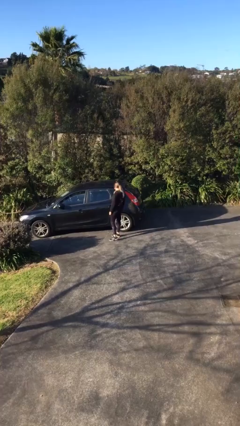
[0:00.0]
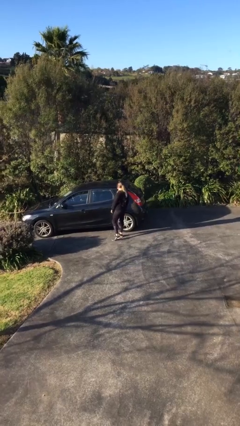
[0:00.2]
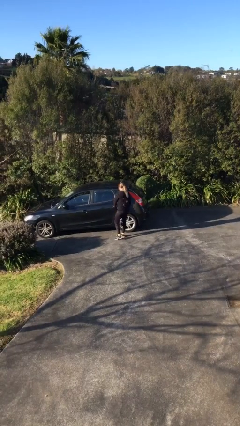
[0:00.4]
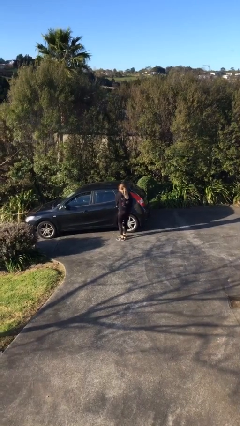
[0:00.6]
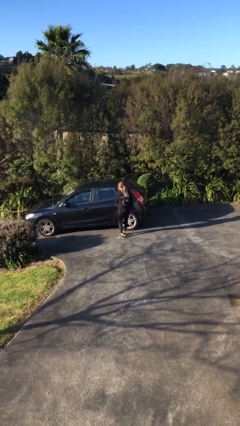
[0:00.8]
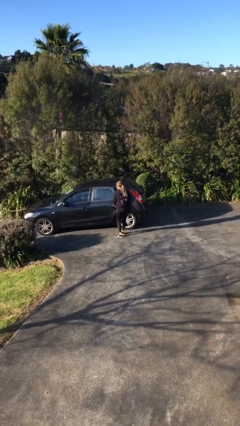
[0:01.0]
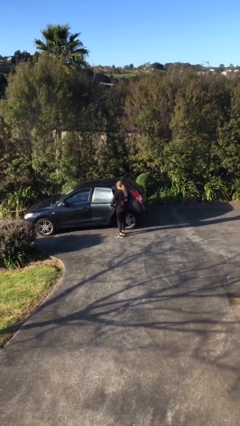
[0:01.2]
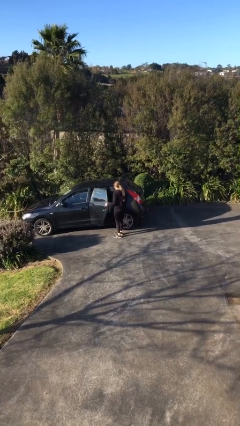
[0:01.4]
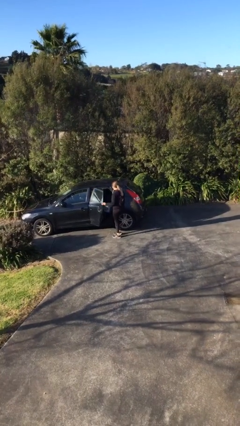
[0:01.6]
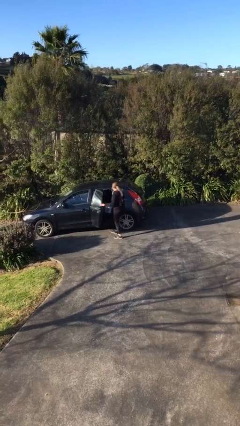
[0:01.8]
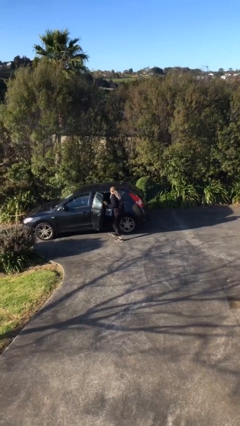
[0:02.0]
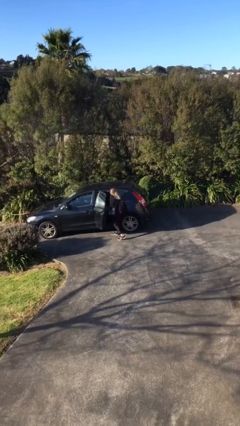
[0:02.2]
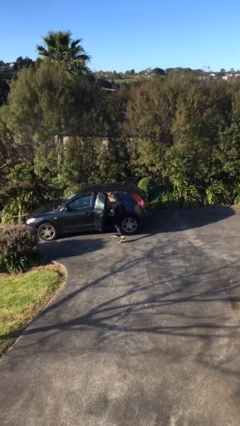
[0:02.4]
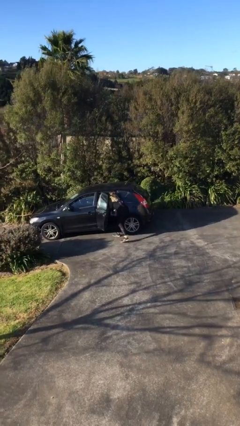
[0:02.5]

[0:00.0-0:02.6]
person opens car door

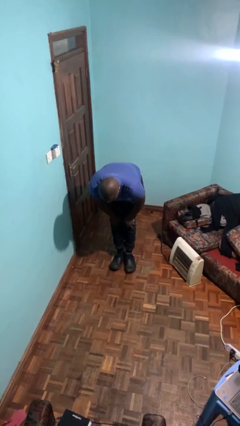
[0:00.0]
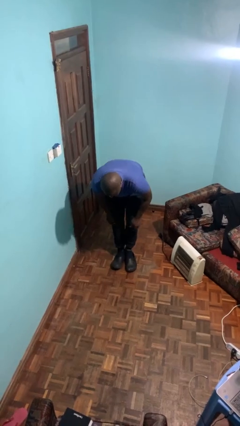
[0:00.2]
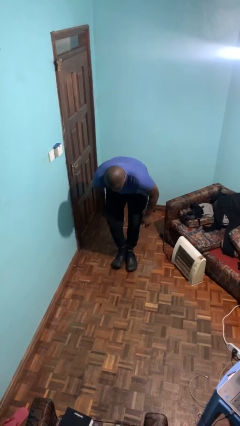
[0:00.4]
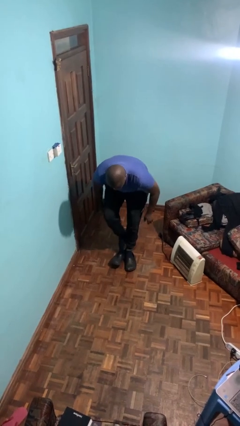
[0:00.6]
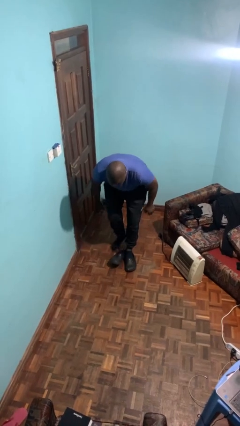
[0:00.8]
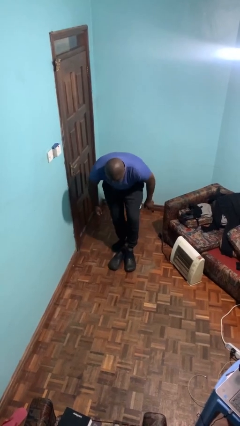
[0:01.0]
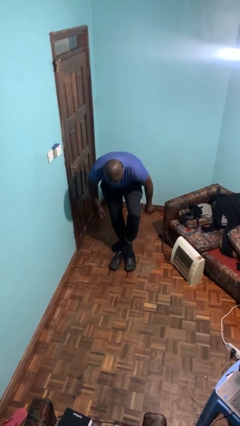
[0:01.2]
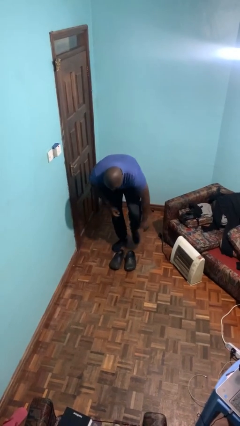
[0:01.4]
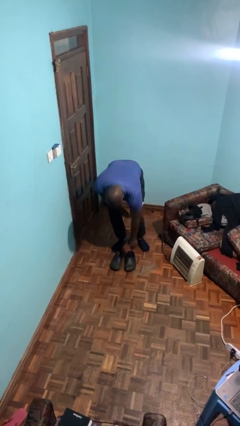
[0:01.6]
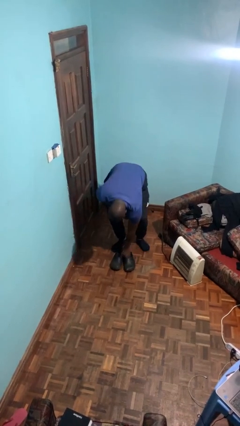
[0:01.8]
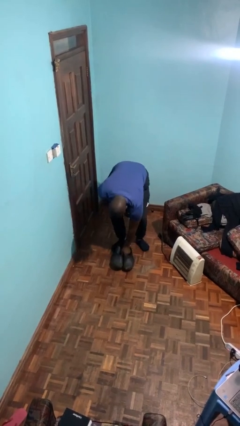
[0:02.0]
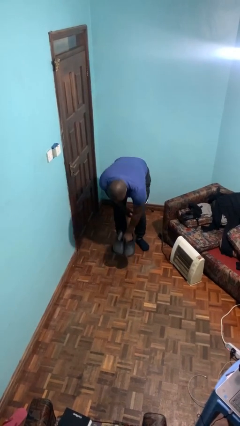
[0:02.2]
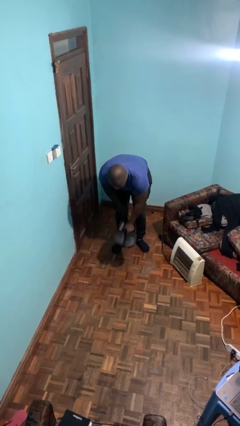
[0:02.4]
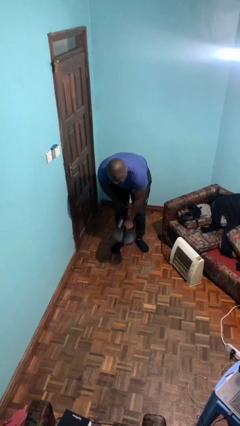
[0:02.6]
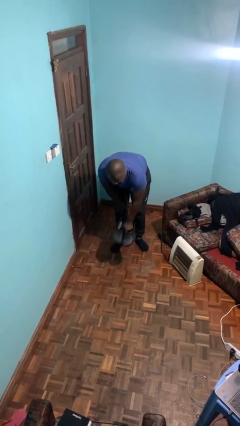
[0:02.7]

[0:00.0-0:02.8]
person takes off shoes

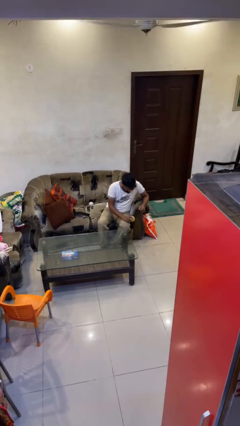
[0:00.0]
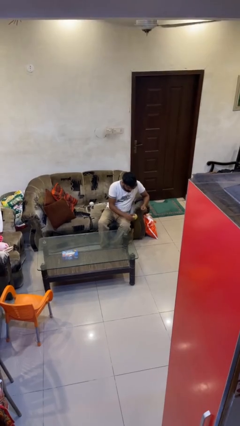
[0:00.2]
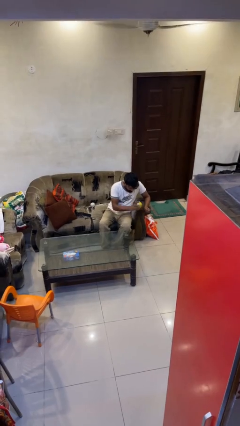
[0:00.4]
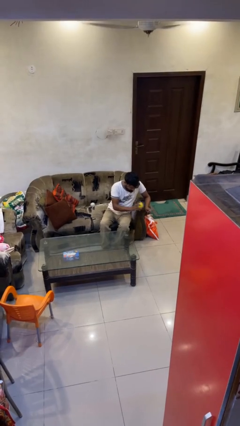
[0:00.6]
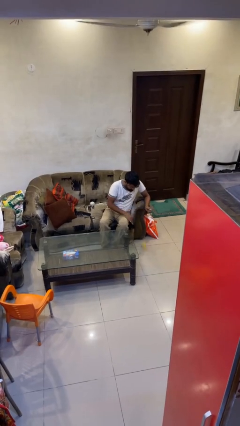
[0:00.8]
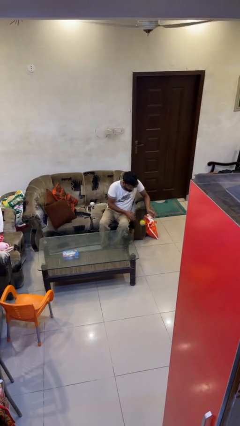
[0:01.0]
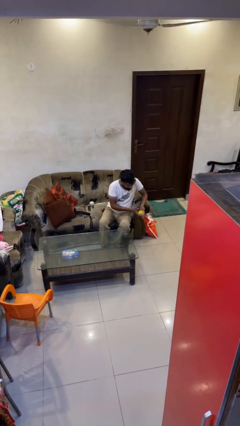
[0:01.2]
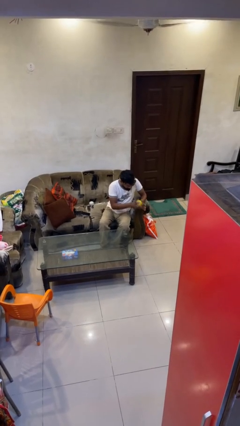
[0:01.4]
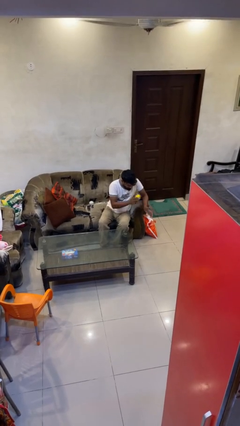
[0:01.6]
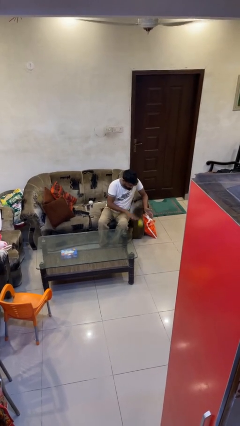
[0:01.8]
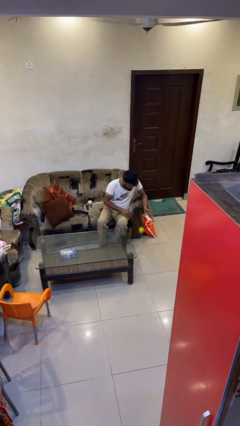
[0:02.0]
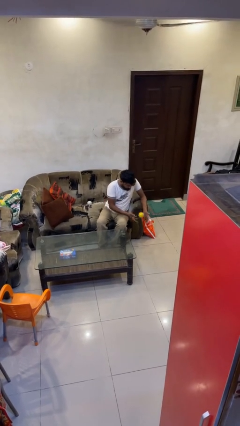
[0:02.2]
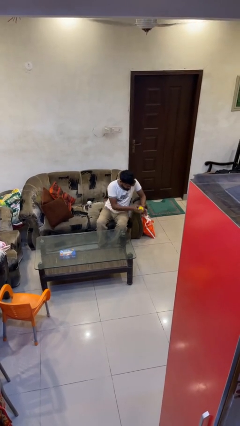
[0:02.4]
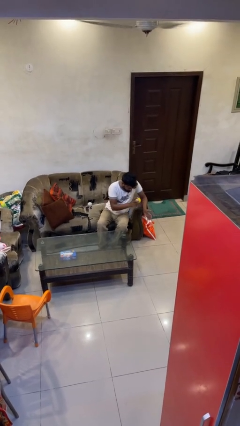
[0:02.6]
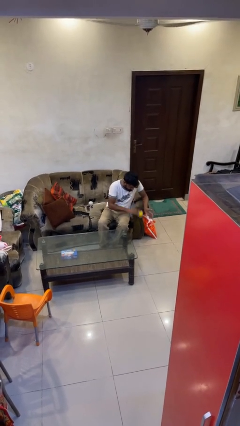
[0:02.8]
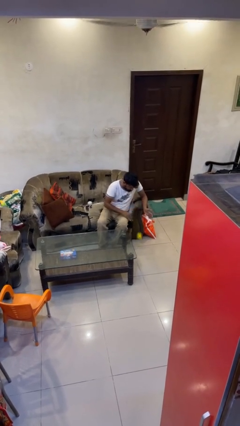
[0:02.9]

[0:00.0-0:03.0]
person bounces ball on floor

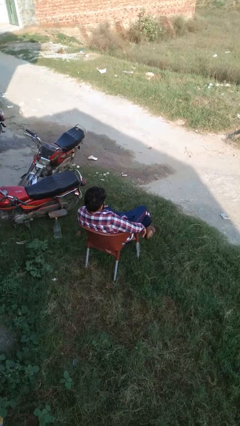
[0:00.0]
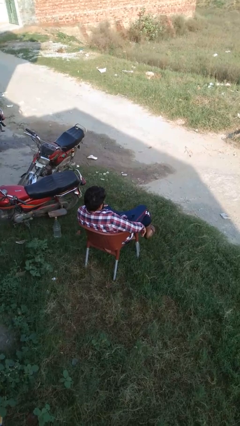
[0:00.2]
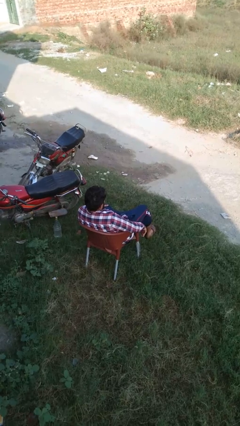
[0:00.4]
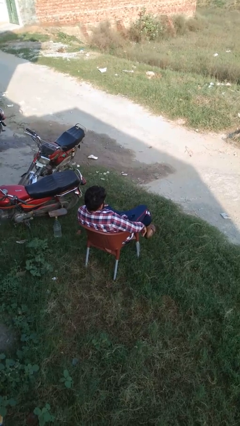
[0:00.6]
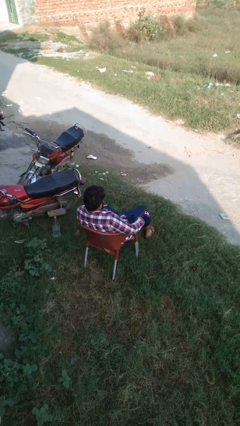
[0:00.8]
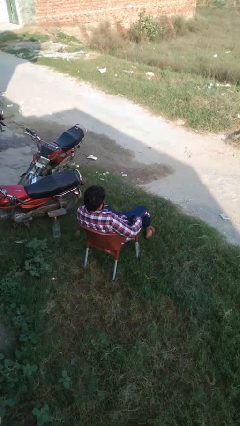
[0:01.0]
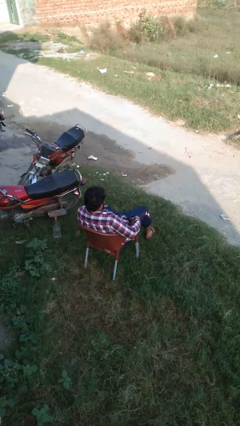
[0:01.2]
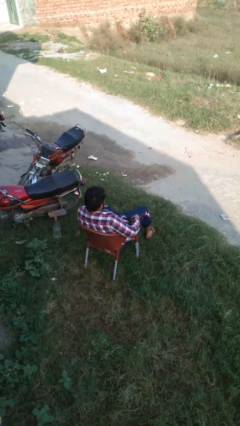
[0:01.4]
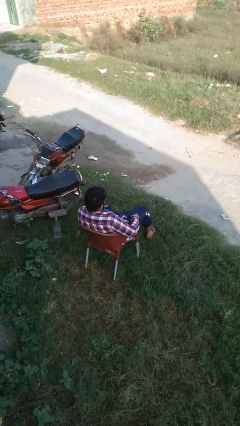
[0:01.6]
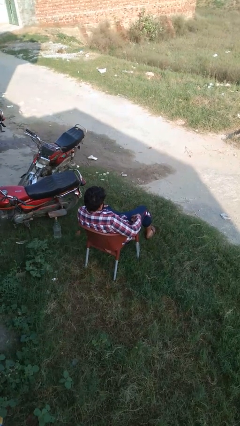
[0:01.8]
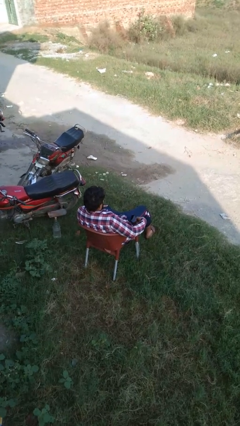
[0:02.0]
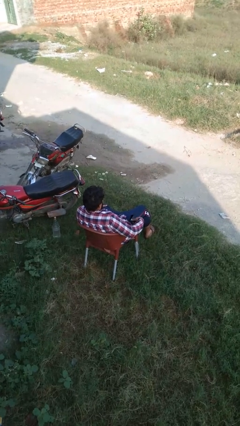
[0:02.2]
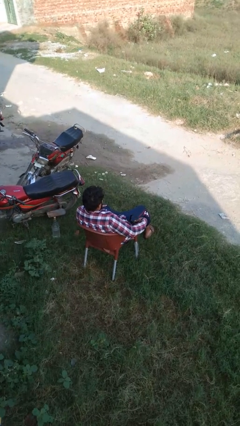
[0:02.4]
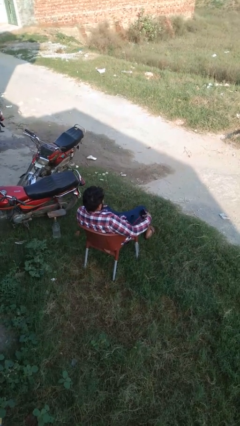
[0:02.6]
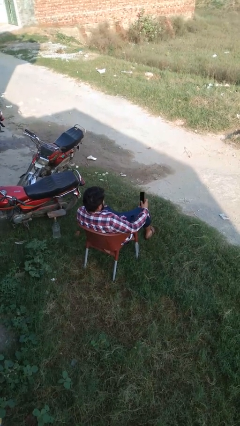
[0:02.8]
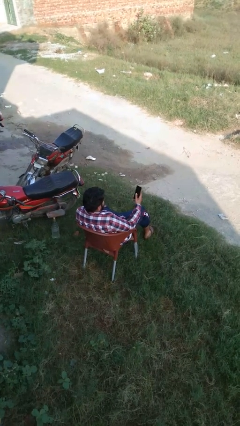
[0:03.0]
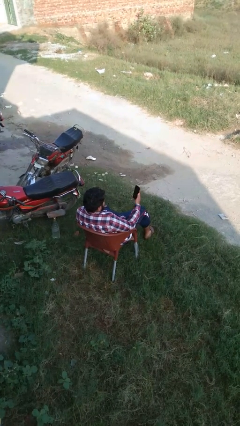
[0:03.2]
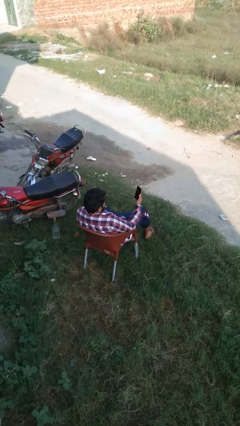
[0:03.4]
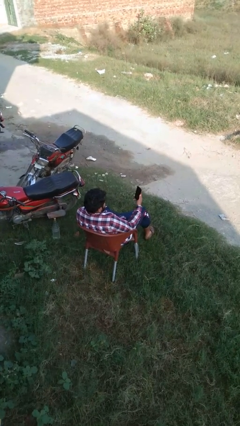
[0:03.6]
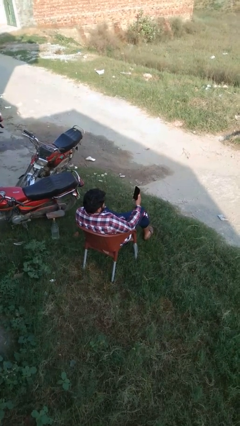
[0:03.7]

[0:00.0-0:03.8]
person takes phone from pocket

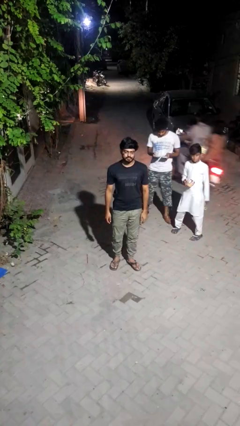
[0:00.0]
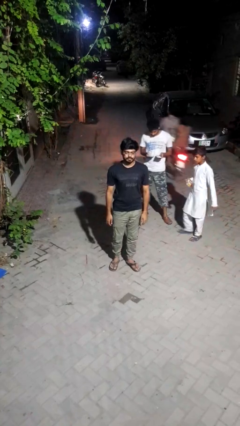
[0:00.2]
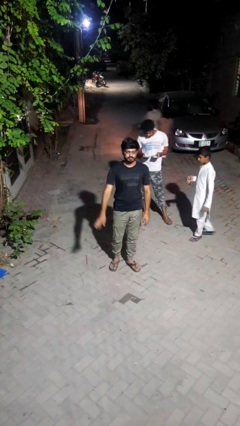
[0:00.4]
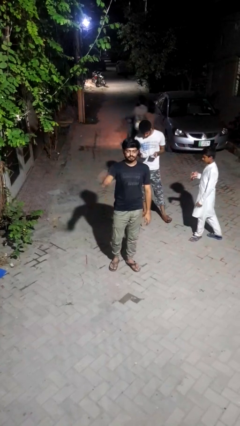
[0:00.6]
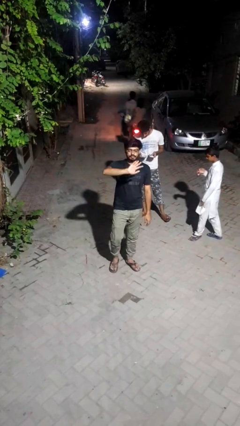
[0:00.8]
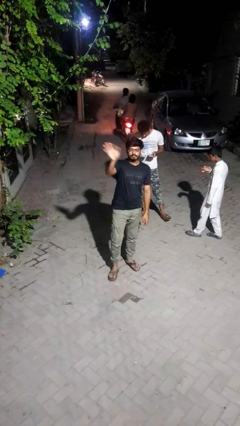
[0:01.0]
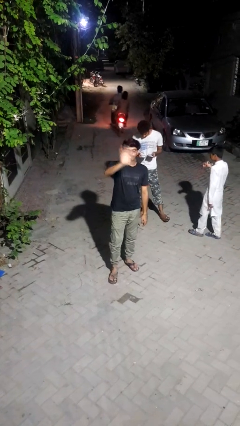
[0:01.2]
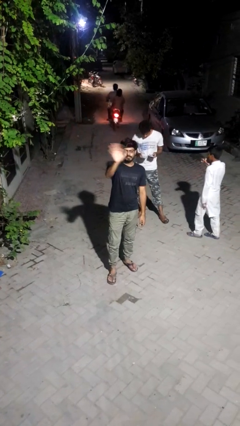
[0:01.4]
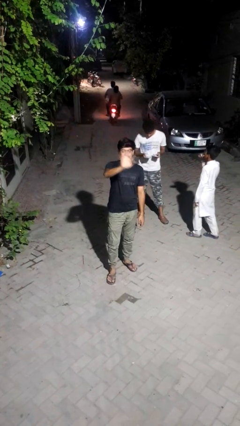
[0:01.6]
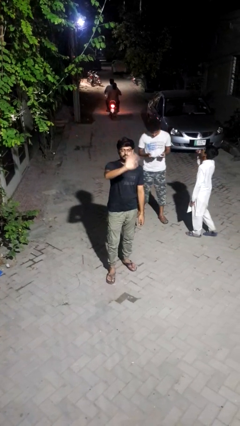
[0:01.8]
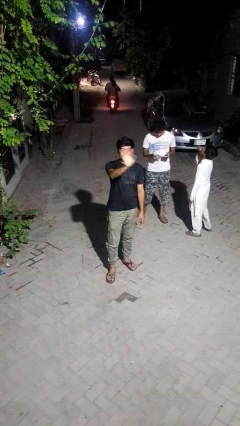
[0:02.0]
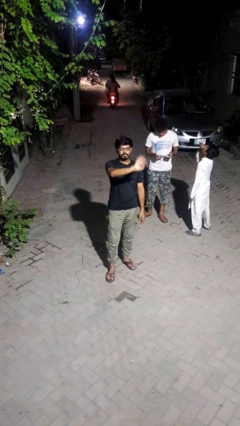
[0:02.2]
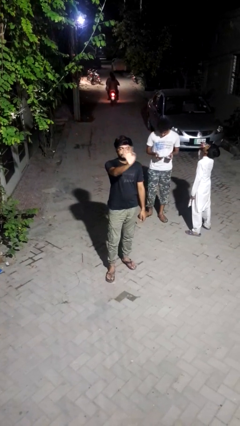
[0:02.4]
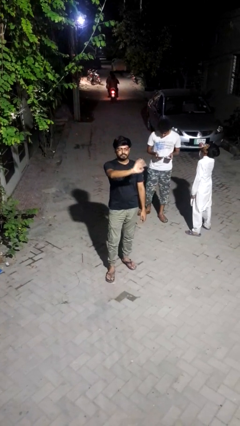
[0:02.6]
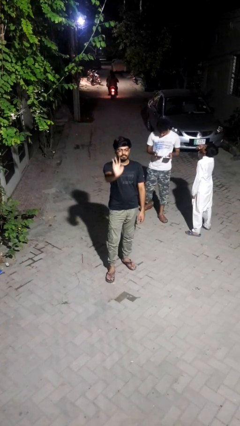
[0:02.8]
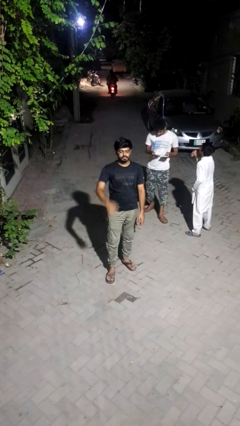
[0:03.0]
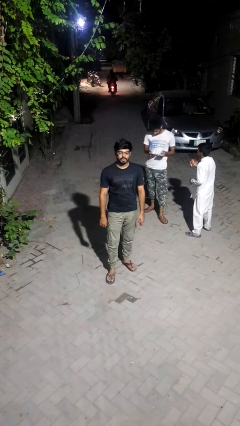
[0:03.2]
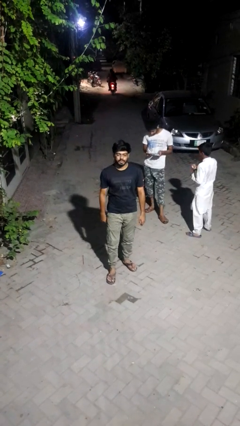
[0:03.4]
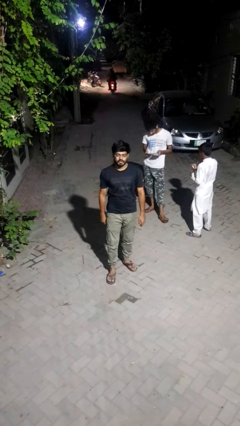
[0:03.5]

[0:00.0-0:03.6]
person waves at person

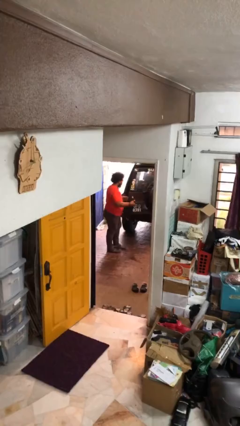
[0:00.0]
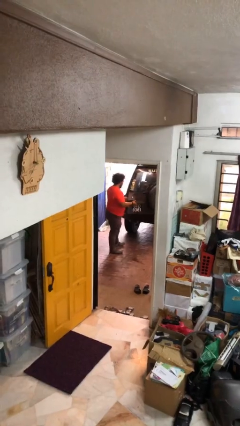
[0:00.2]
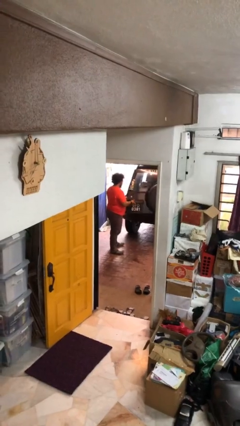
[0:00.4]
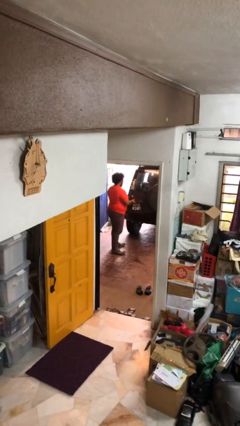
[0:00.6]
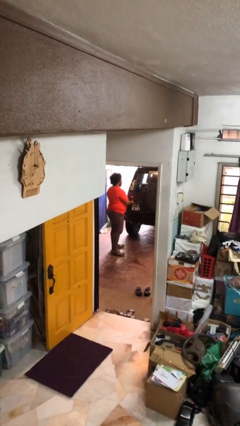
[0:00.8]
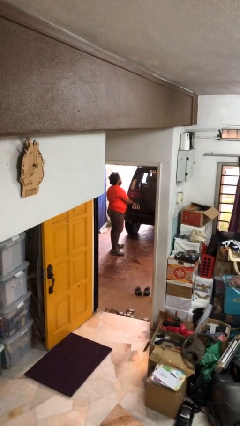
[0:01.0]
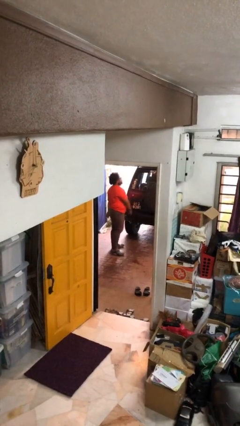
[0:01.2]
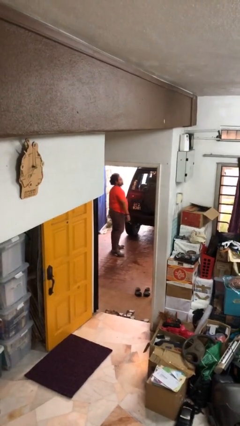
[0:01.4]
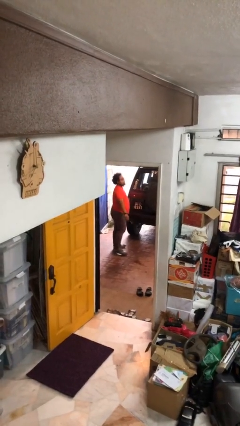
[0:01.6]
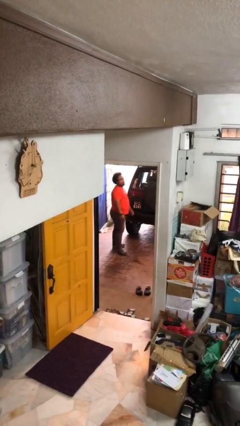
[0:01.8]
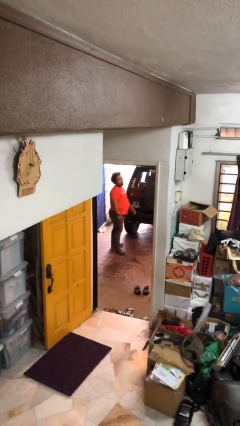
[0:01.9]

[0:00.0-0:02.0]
person closes car trunk
